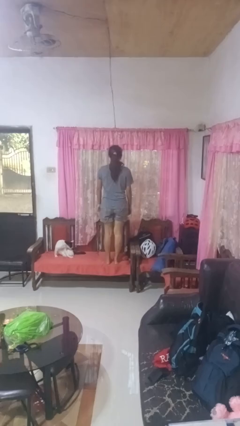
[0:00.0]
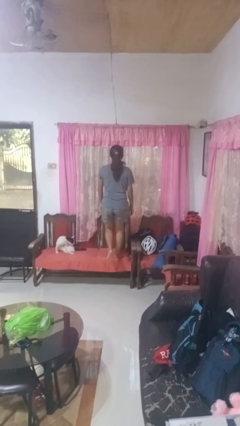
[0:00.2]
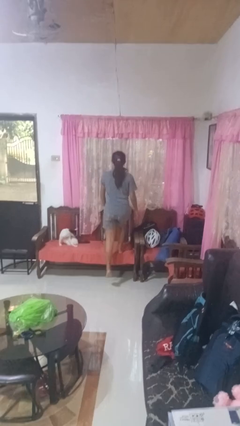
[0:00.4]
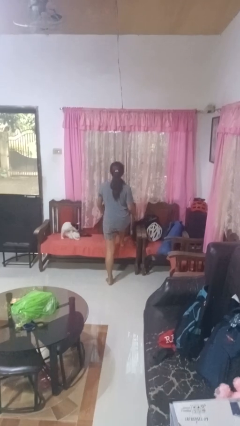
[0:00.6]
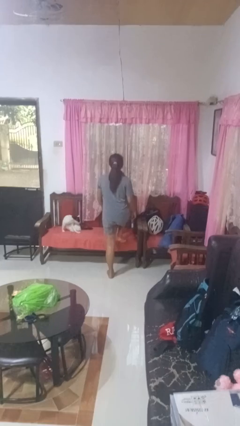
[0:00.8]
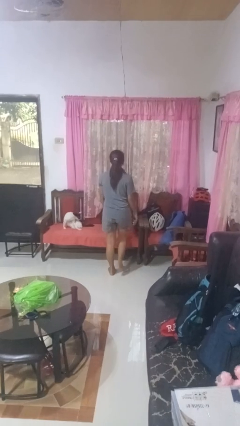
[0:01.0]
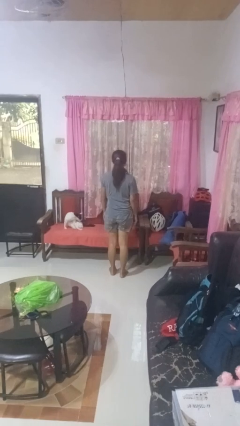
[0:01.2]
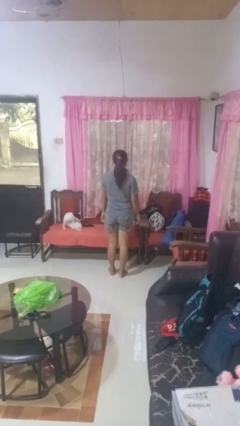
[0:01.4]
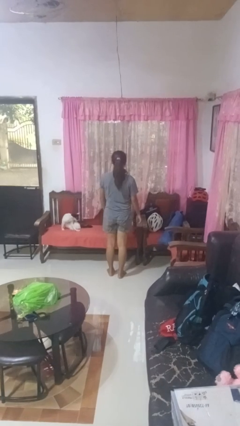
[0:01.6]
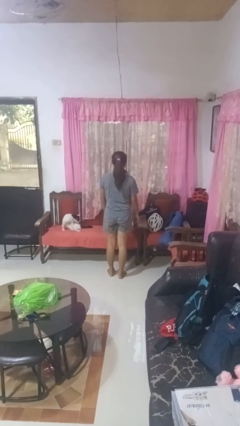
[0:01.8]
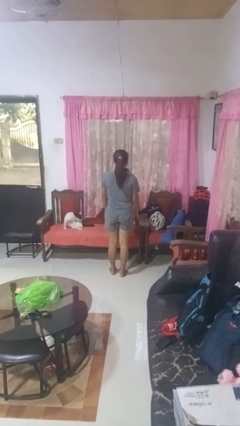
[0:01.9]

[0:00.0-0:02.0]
person climbs off chair

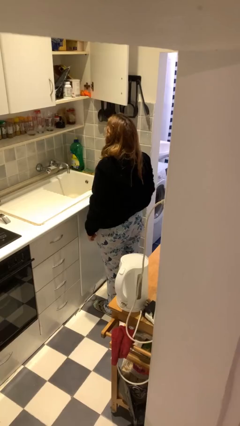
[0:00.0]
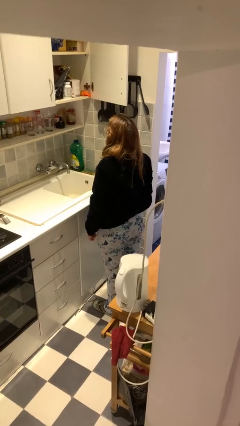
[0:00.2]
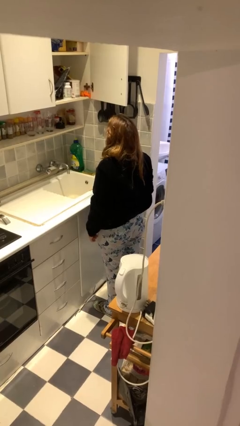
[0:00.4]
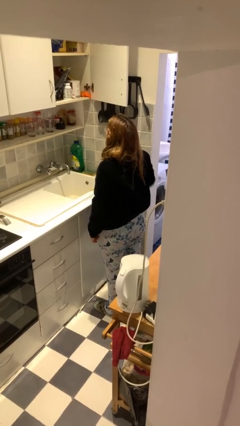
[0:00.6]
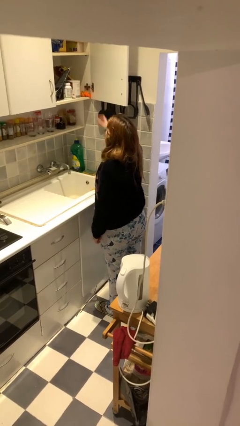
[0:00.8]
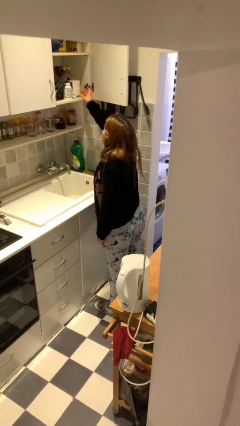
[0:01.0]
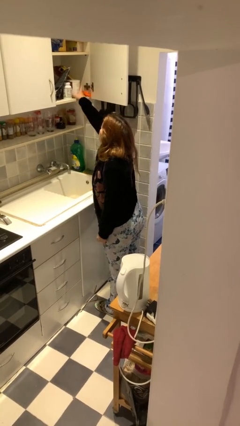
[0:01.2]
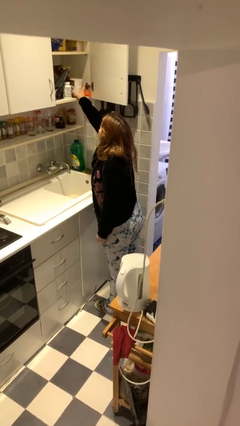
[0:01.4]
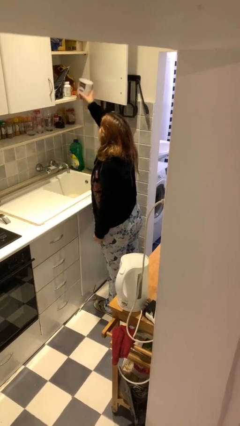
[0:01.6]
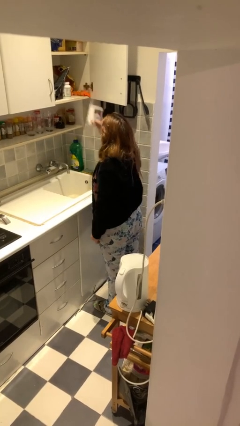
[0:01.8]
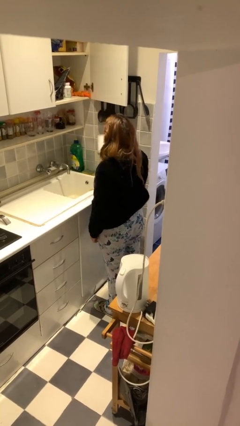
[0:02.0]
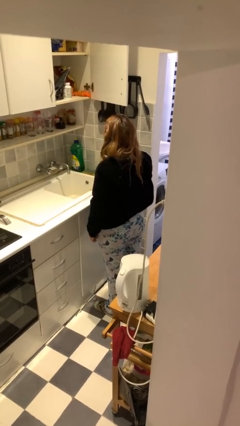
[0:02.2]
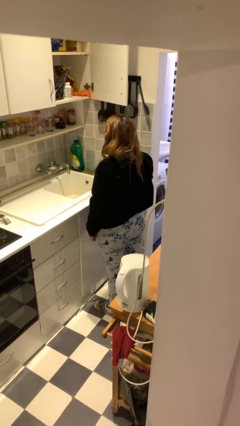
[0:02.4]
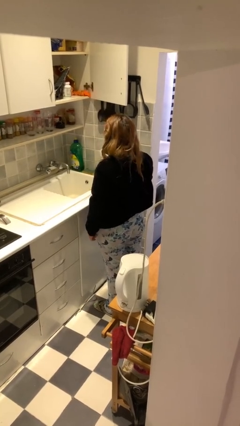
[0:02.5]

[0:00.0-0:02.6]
person takes object from cabinet

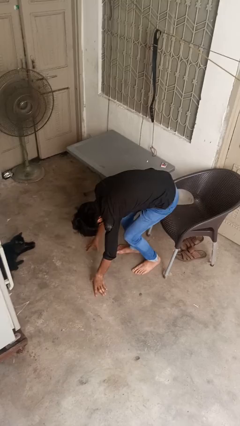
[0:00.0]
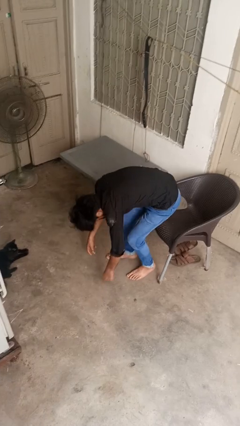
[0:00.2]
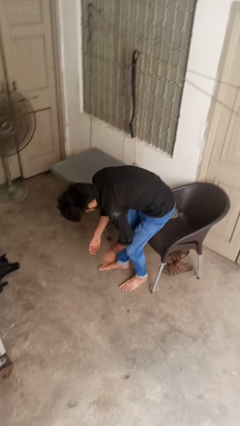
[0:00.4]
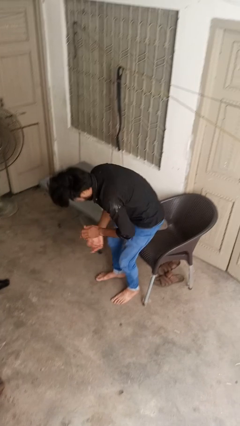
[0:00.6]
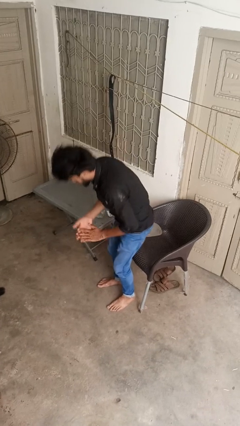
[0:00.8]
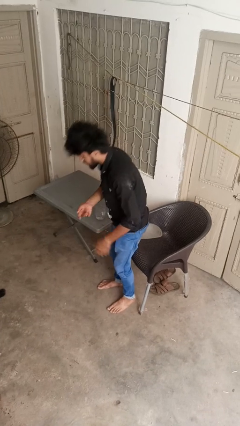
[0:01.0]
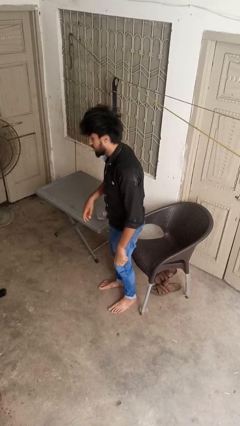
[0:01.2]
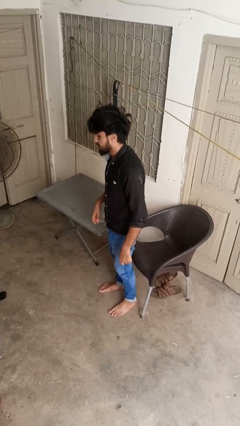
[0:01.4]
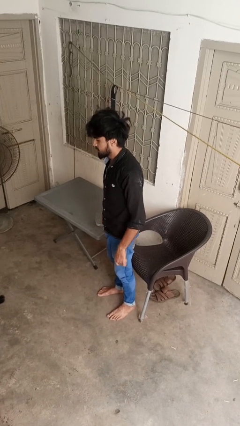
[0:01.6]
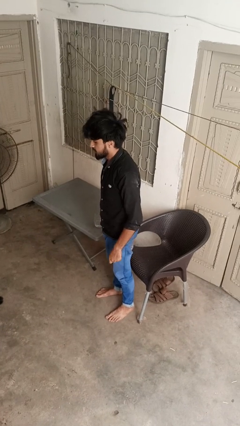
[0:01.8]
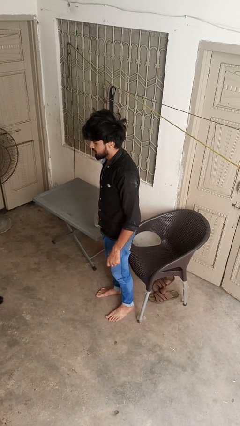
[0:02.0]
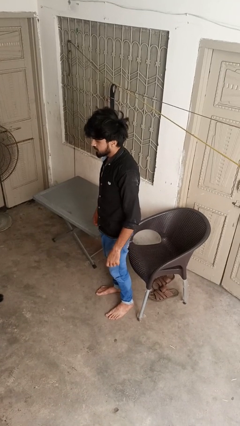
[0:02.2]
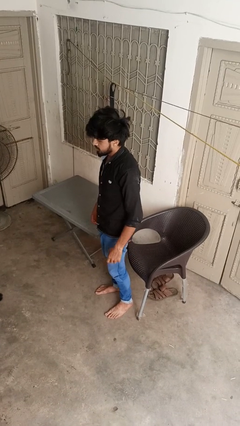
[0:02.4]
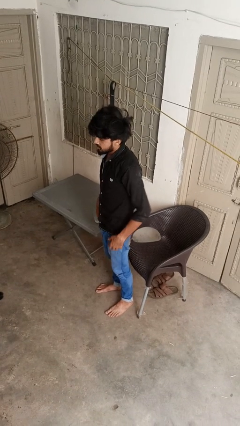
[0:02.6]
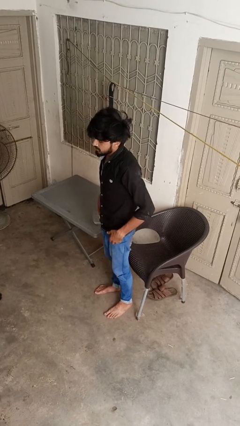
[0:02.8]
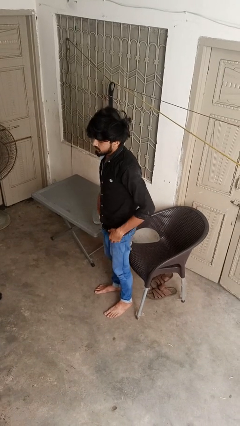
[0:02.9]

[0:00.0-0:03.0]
person stands up from floor

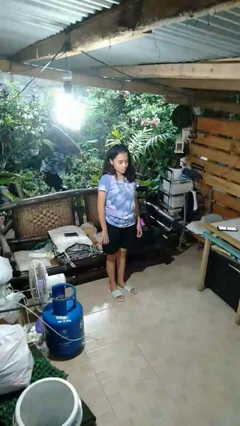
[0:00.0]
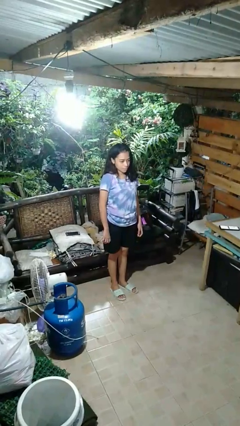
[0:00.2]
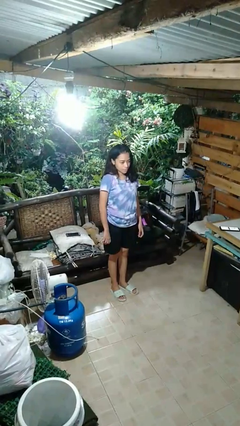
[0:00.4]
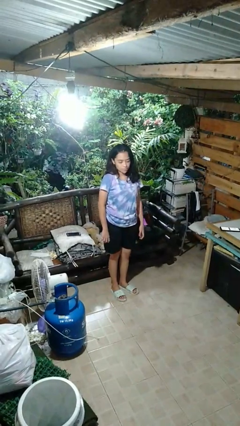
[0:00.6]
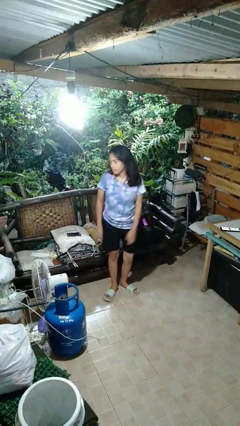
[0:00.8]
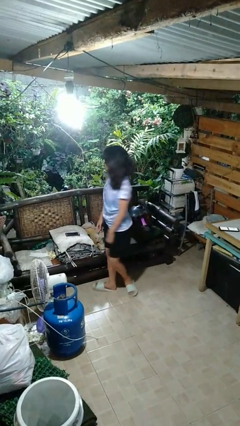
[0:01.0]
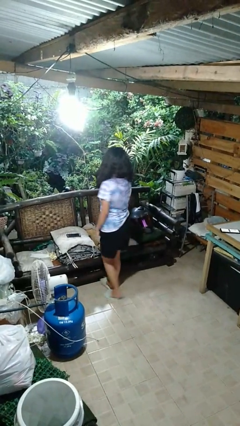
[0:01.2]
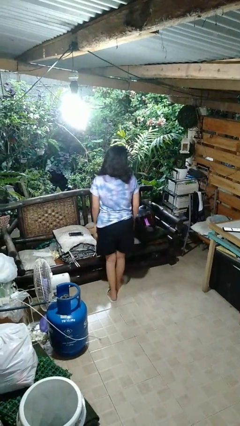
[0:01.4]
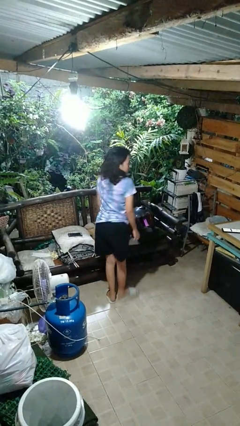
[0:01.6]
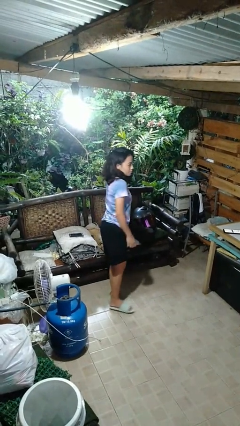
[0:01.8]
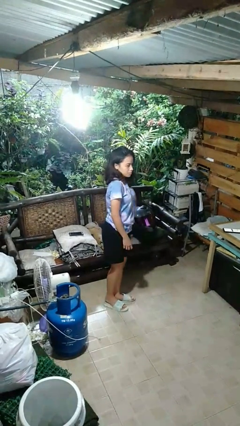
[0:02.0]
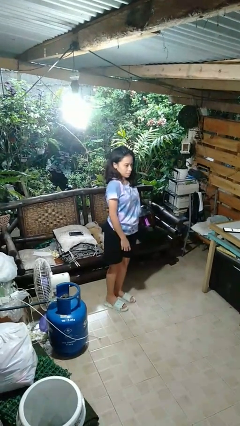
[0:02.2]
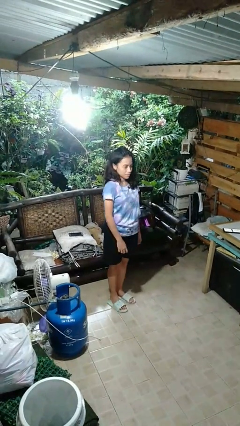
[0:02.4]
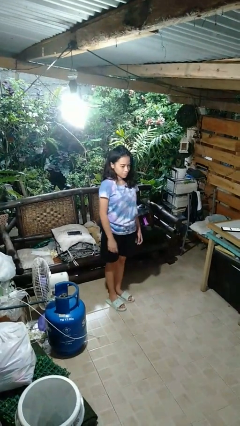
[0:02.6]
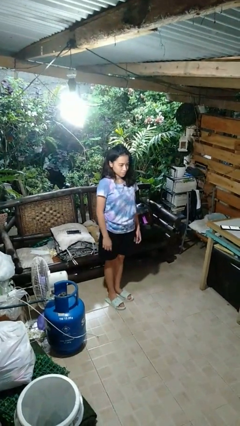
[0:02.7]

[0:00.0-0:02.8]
person twirls

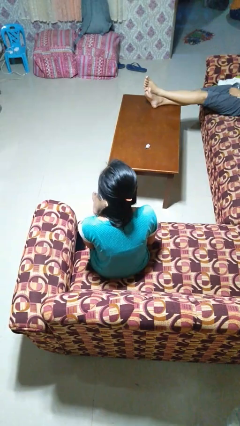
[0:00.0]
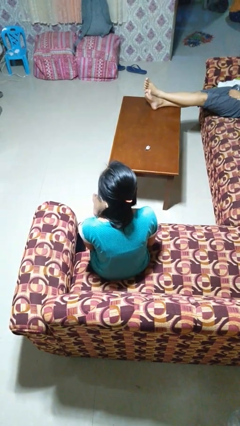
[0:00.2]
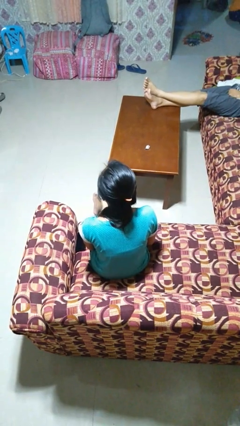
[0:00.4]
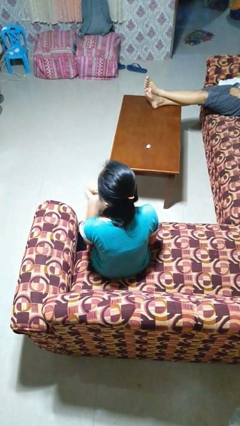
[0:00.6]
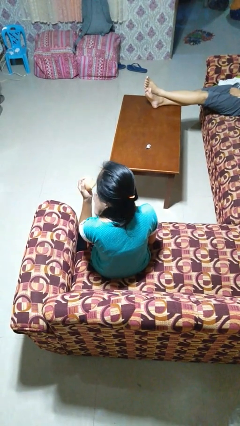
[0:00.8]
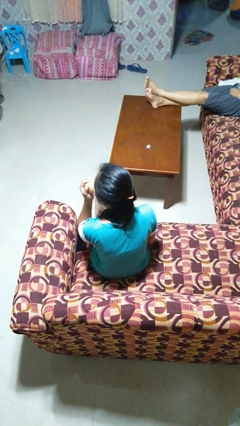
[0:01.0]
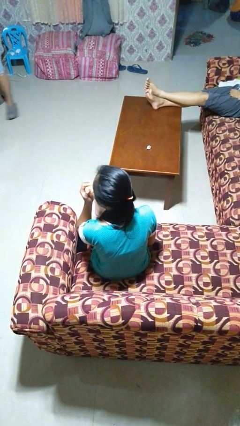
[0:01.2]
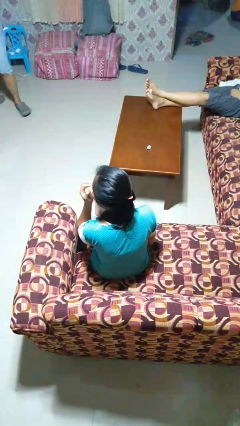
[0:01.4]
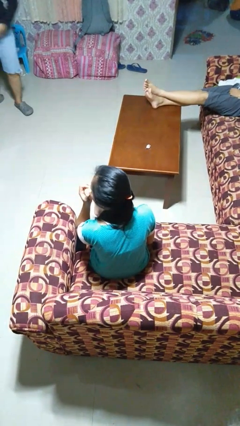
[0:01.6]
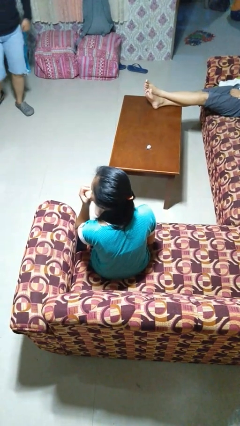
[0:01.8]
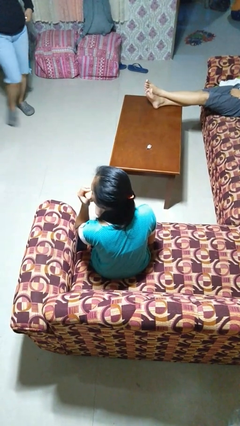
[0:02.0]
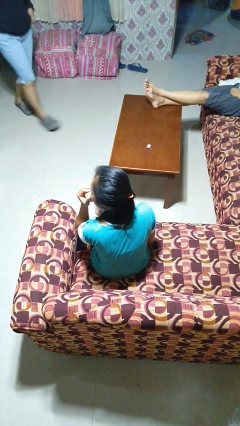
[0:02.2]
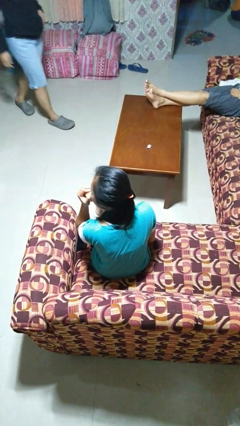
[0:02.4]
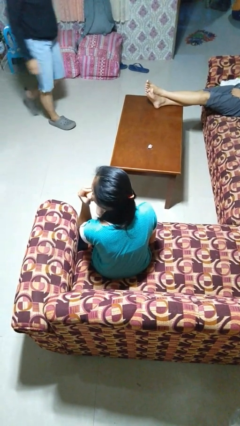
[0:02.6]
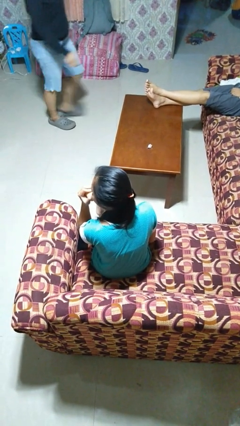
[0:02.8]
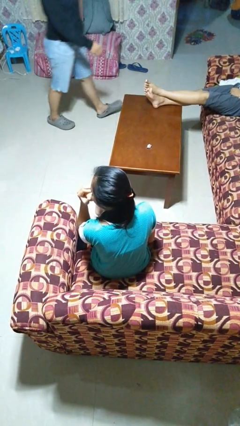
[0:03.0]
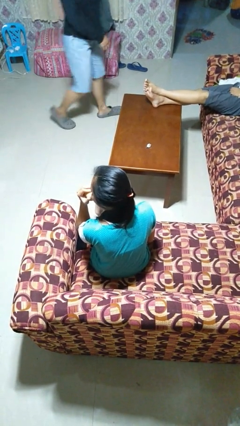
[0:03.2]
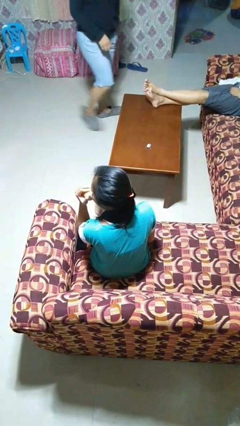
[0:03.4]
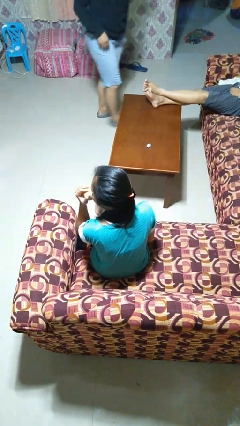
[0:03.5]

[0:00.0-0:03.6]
person eats apple

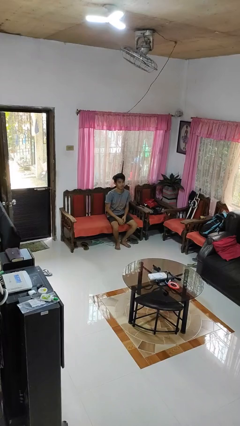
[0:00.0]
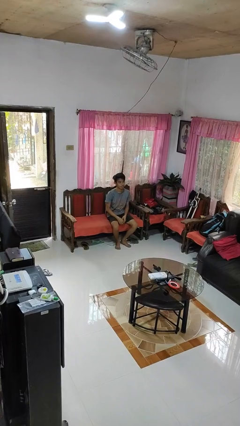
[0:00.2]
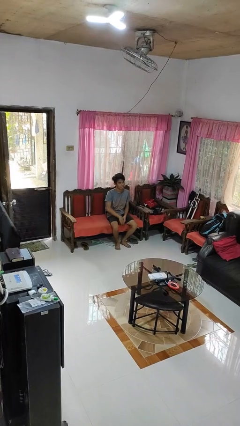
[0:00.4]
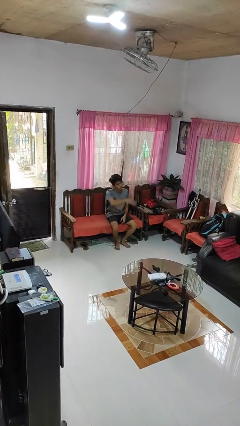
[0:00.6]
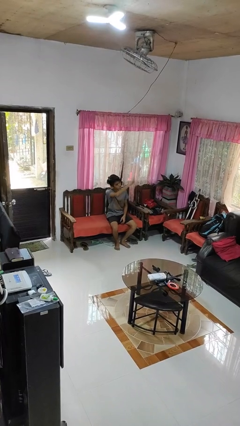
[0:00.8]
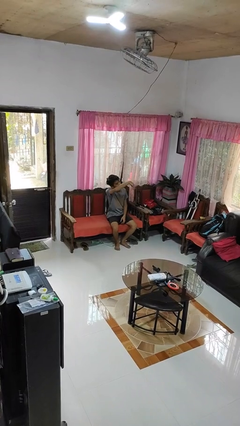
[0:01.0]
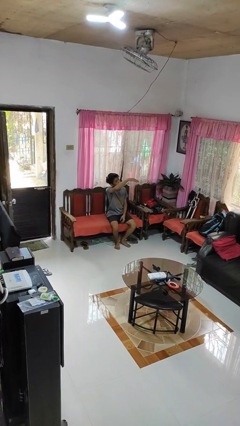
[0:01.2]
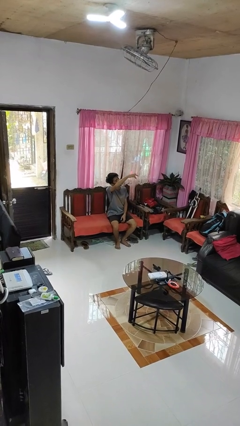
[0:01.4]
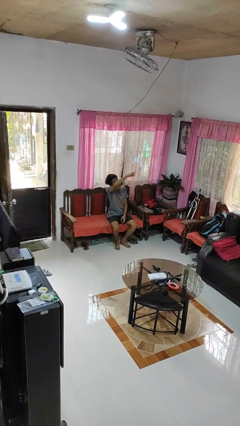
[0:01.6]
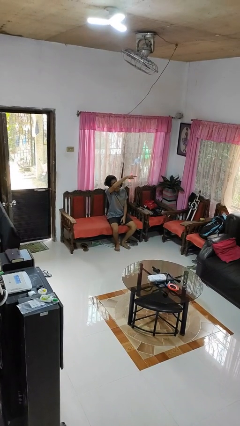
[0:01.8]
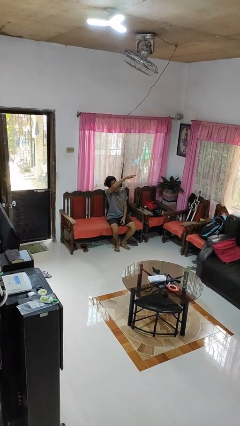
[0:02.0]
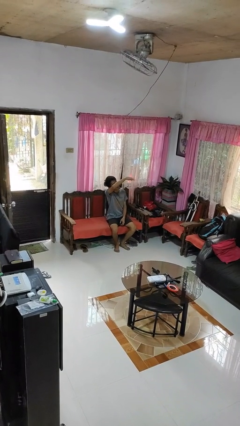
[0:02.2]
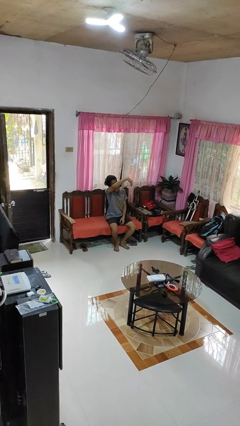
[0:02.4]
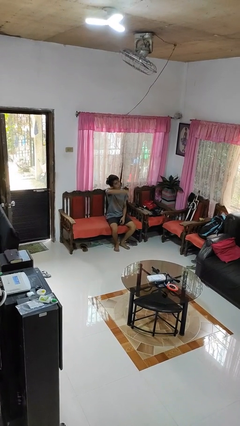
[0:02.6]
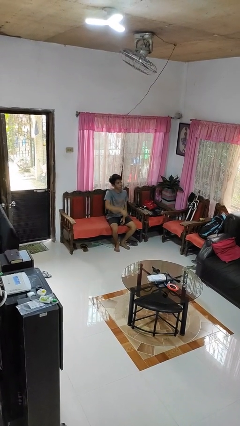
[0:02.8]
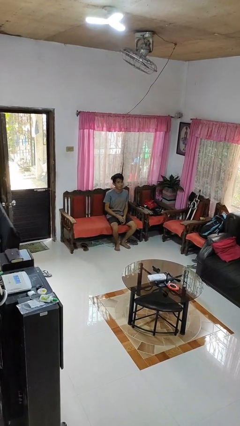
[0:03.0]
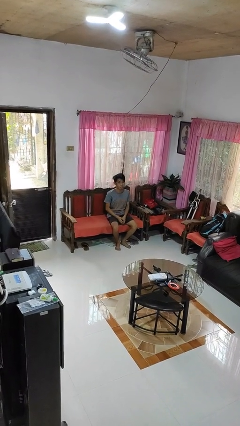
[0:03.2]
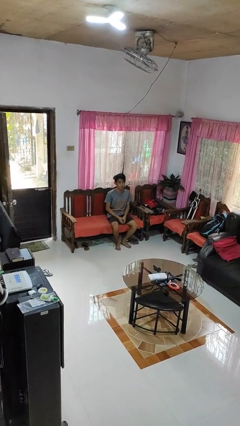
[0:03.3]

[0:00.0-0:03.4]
person gestures come here
